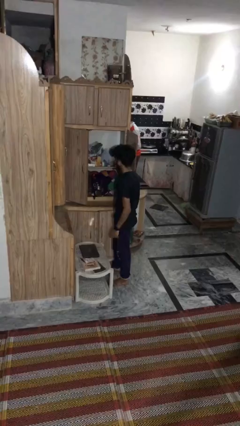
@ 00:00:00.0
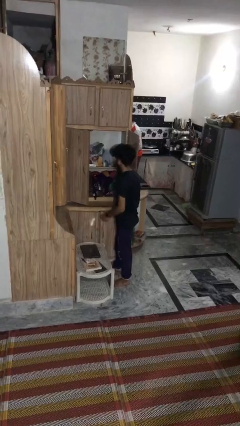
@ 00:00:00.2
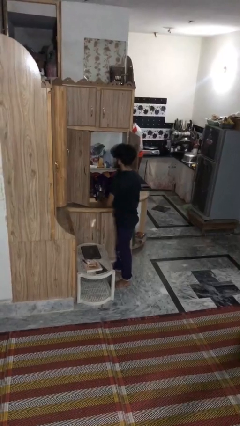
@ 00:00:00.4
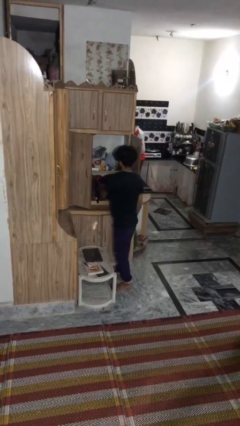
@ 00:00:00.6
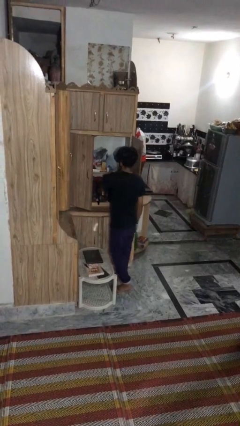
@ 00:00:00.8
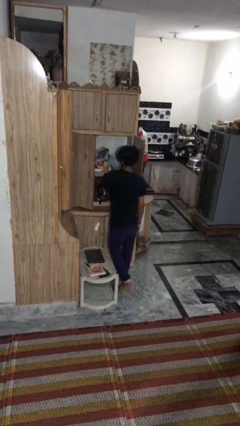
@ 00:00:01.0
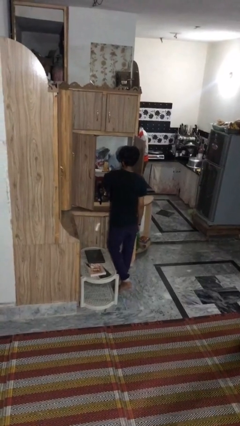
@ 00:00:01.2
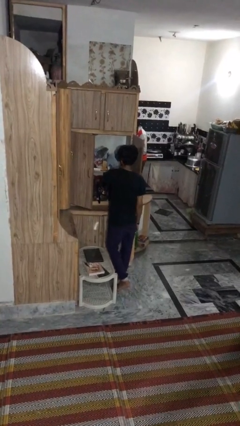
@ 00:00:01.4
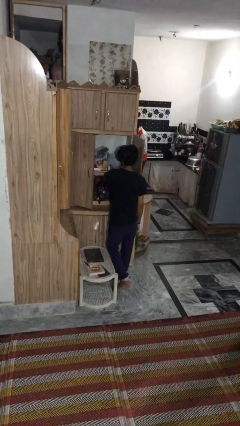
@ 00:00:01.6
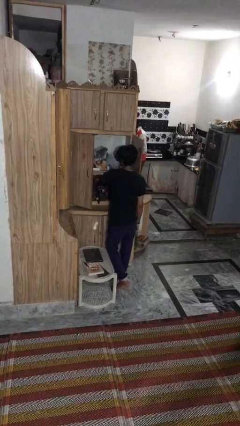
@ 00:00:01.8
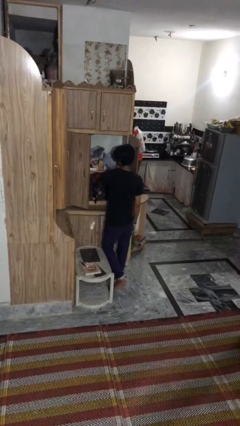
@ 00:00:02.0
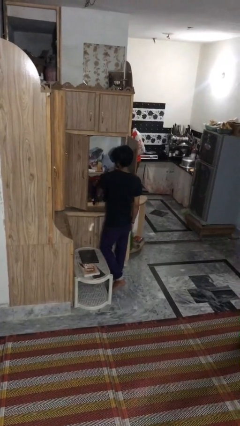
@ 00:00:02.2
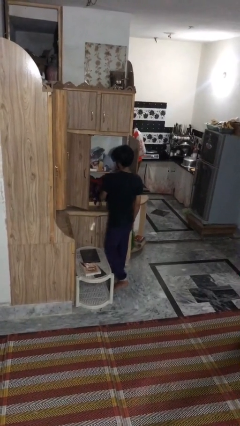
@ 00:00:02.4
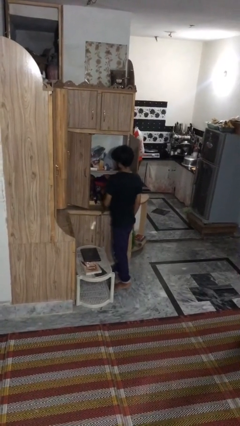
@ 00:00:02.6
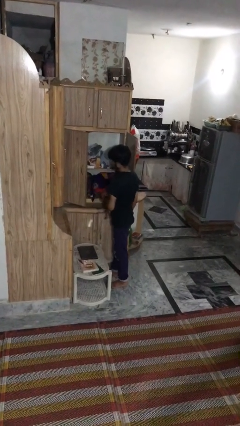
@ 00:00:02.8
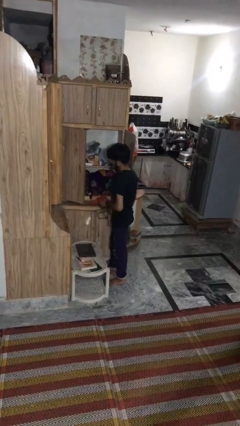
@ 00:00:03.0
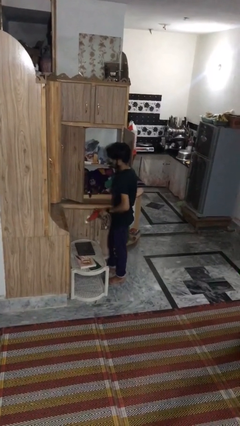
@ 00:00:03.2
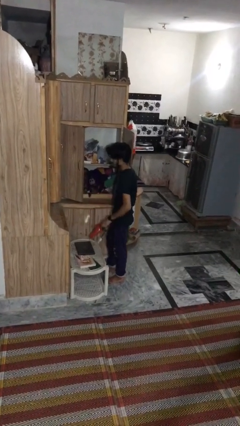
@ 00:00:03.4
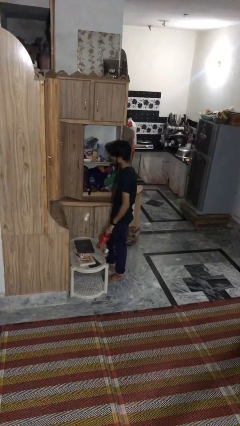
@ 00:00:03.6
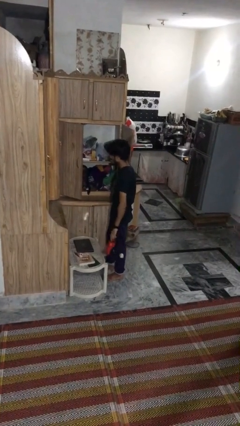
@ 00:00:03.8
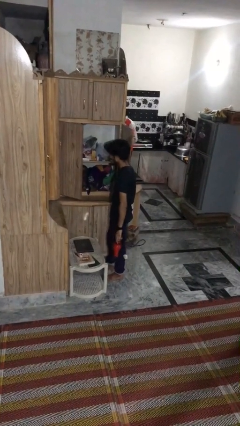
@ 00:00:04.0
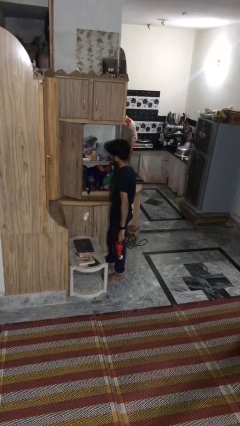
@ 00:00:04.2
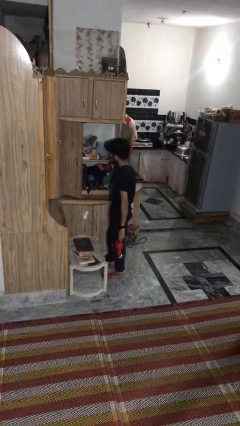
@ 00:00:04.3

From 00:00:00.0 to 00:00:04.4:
person picks up object from cabinet

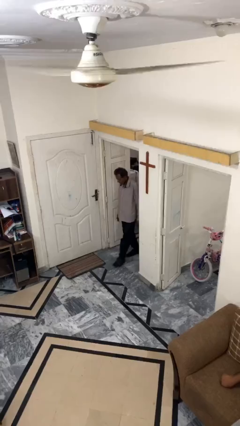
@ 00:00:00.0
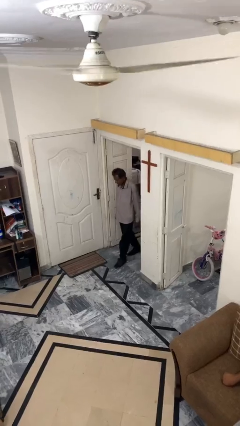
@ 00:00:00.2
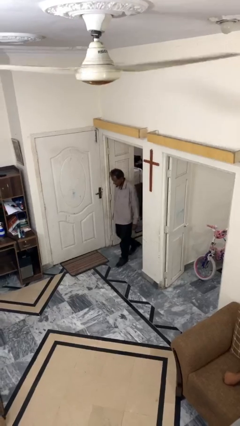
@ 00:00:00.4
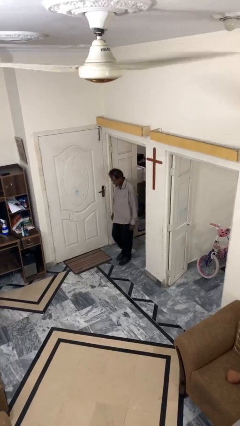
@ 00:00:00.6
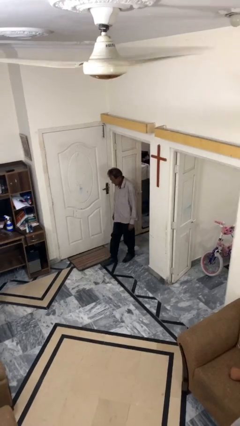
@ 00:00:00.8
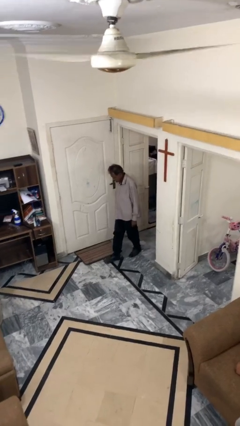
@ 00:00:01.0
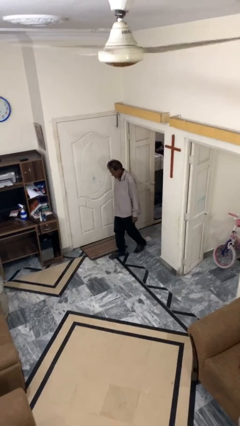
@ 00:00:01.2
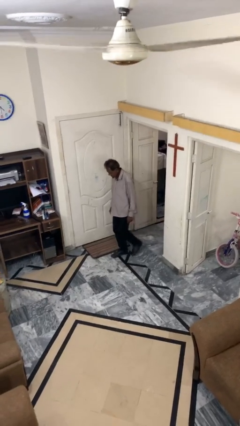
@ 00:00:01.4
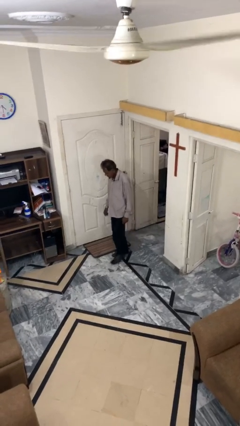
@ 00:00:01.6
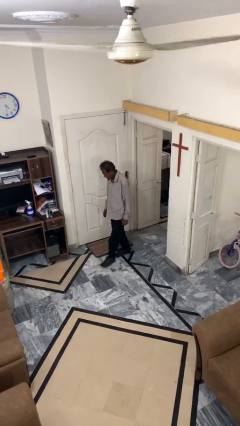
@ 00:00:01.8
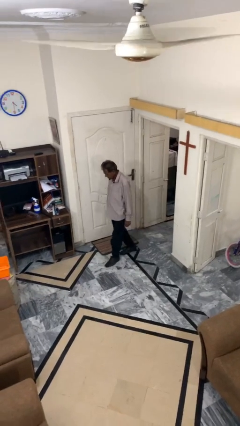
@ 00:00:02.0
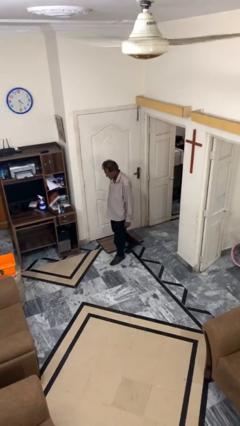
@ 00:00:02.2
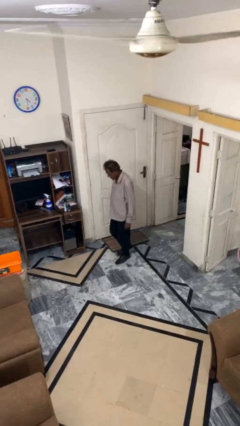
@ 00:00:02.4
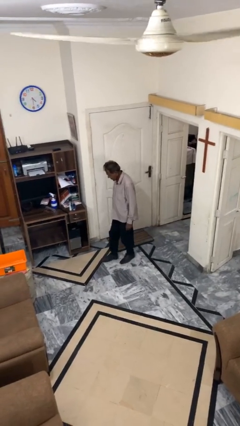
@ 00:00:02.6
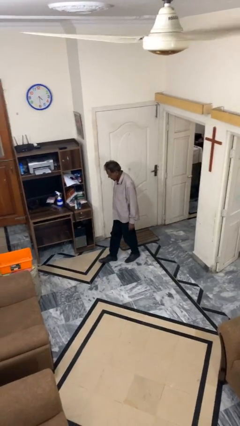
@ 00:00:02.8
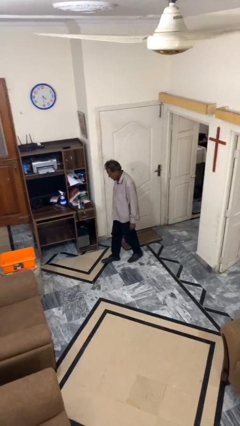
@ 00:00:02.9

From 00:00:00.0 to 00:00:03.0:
person enters scene through structure

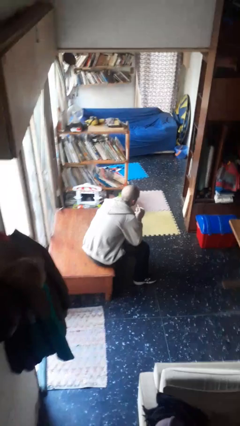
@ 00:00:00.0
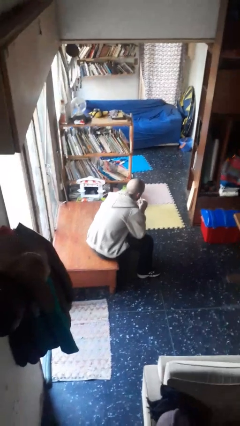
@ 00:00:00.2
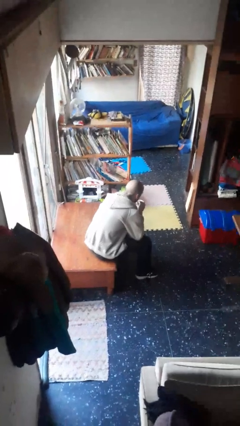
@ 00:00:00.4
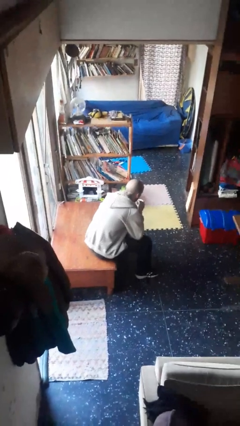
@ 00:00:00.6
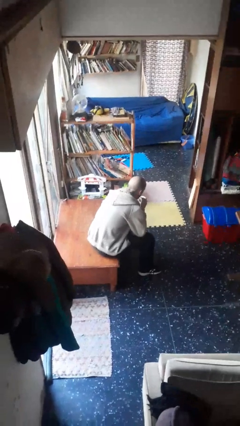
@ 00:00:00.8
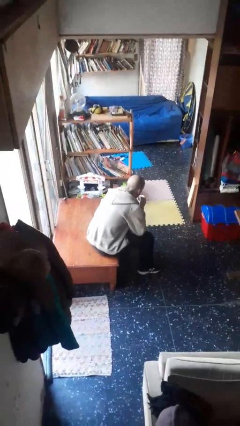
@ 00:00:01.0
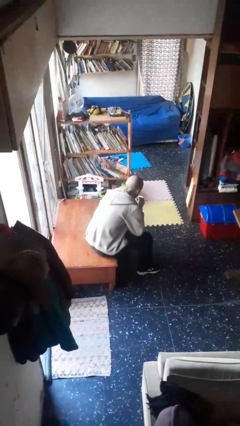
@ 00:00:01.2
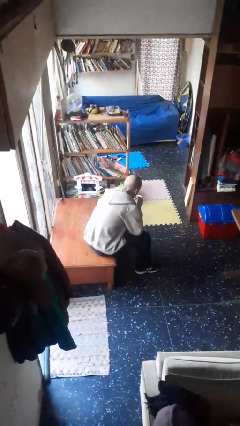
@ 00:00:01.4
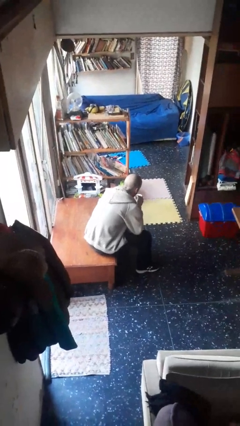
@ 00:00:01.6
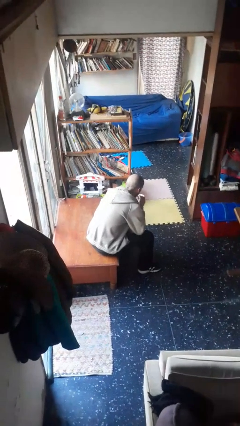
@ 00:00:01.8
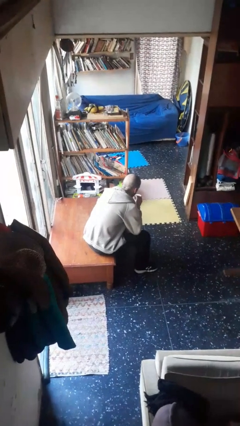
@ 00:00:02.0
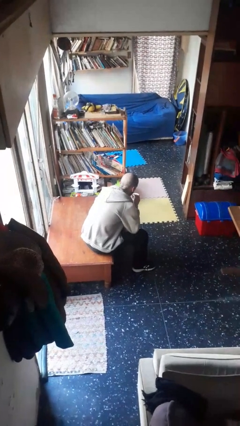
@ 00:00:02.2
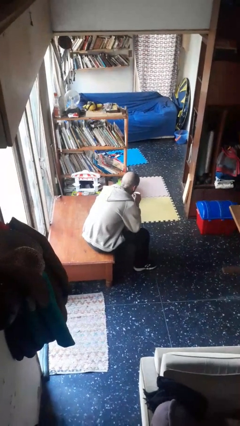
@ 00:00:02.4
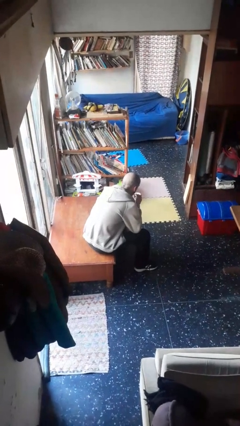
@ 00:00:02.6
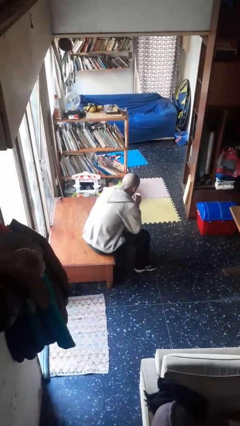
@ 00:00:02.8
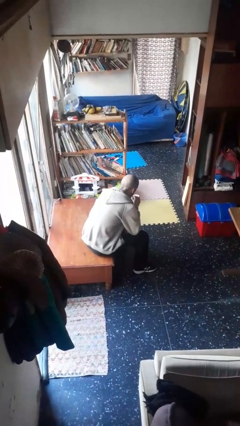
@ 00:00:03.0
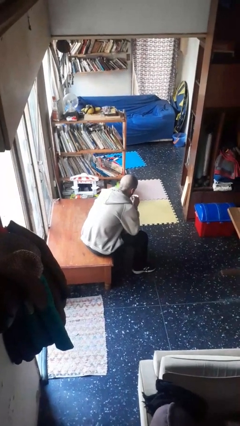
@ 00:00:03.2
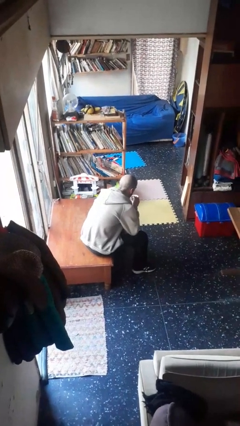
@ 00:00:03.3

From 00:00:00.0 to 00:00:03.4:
person drinks from straw

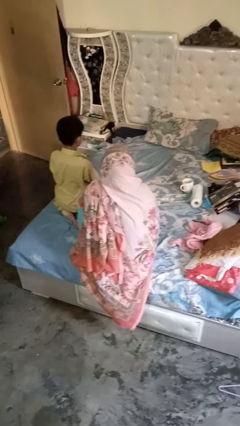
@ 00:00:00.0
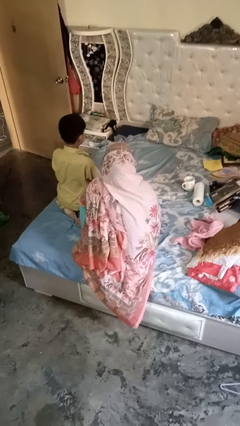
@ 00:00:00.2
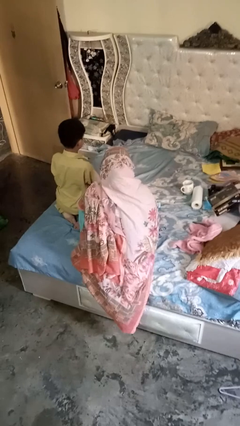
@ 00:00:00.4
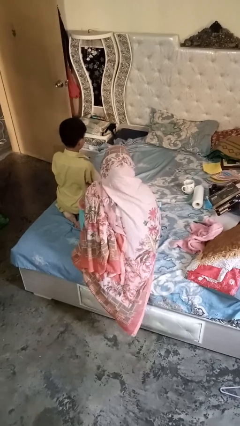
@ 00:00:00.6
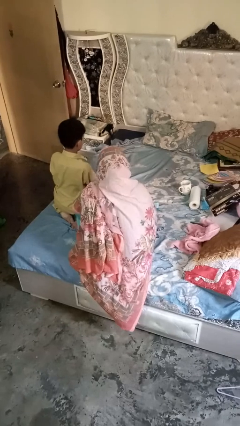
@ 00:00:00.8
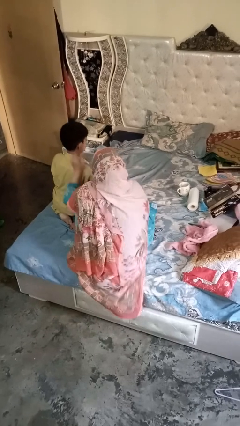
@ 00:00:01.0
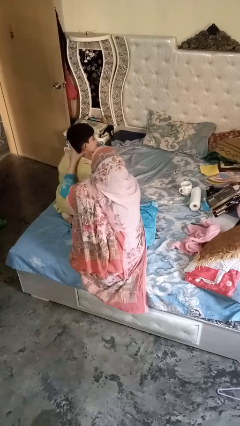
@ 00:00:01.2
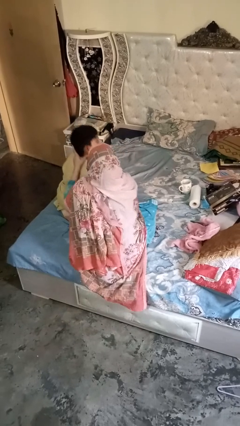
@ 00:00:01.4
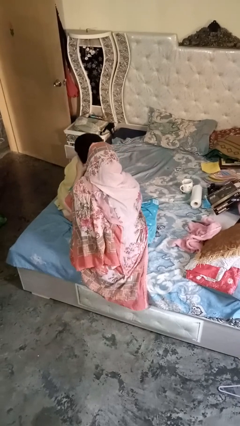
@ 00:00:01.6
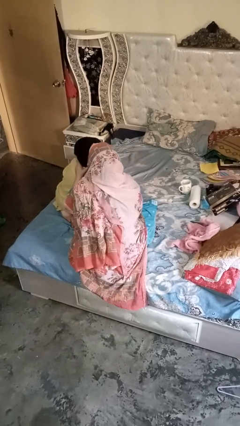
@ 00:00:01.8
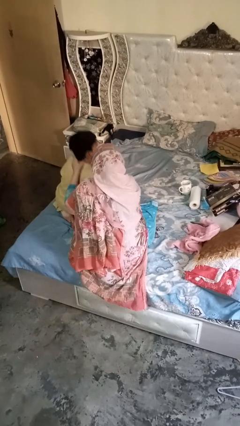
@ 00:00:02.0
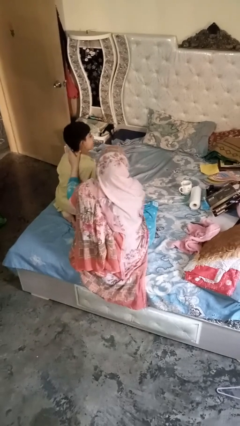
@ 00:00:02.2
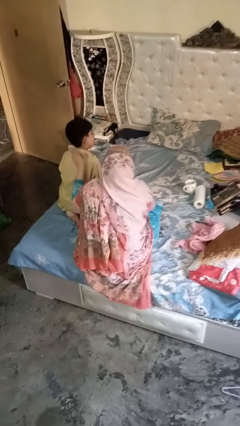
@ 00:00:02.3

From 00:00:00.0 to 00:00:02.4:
person gestures blow kiss

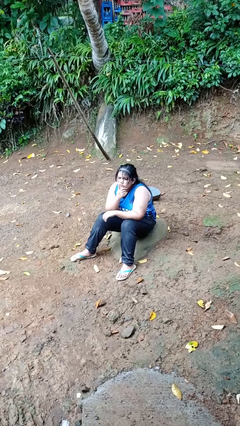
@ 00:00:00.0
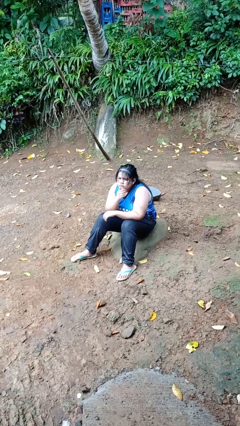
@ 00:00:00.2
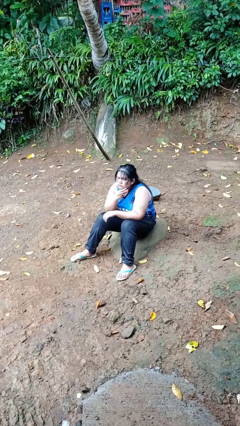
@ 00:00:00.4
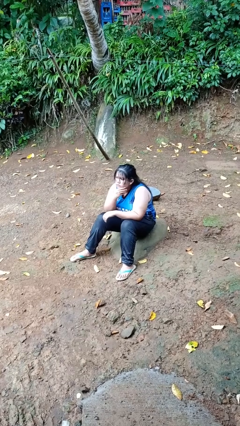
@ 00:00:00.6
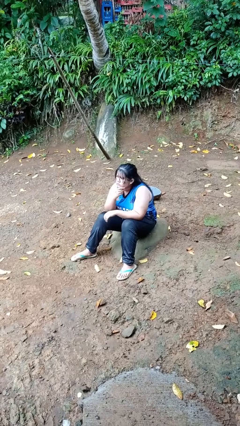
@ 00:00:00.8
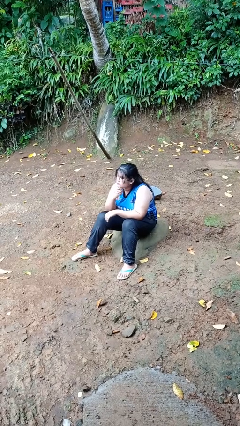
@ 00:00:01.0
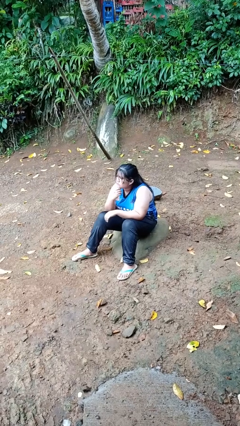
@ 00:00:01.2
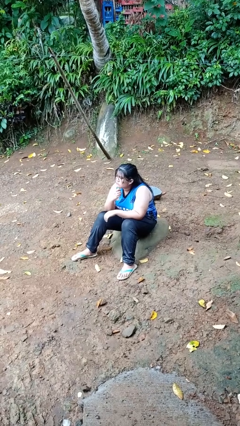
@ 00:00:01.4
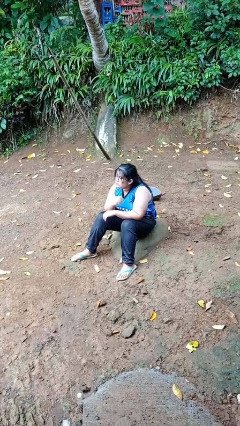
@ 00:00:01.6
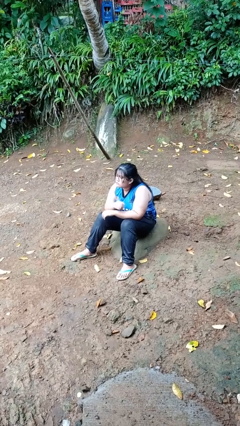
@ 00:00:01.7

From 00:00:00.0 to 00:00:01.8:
person strokes chin

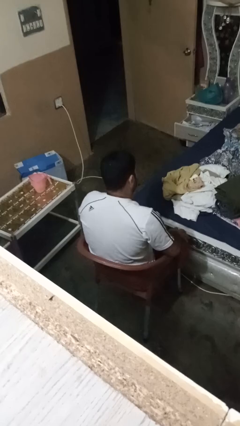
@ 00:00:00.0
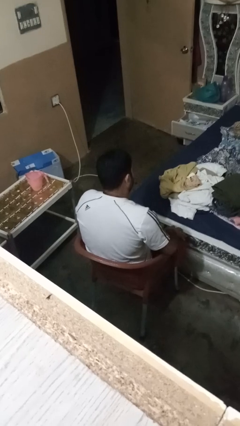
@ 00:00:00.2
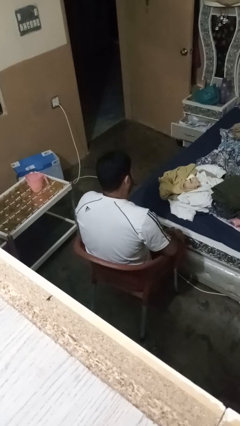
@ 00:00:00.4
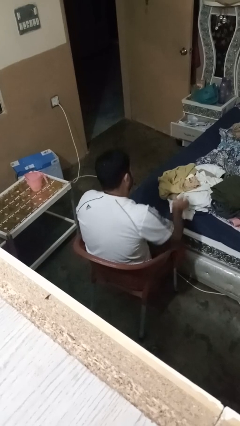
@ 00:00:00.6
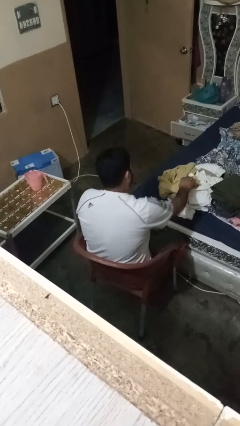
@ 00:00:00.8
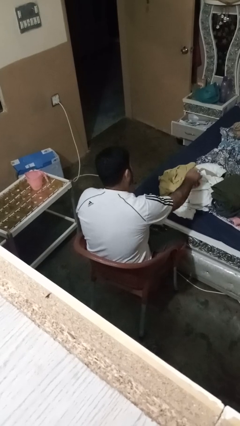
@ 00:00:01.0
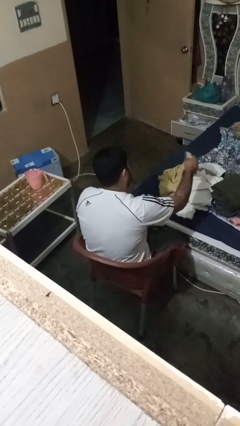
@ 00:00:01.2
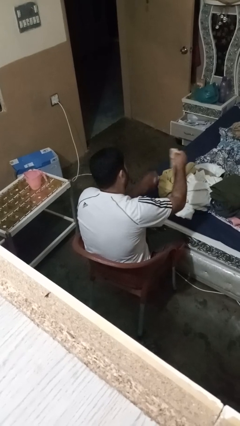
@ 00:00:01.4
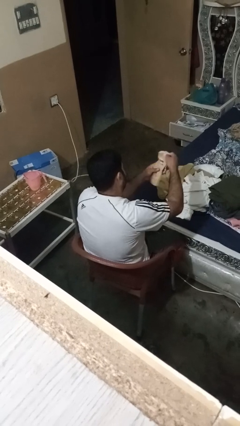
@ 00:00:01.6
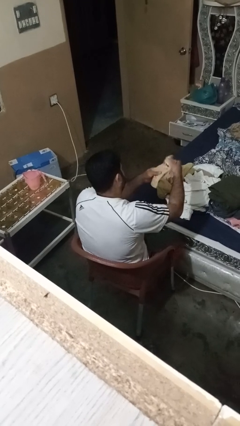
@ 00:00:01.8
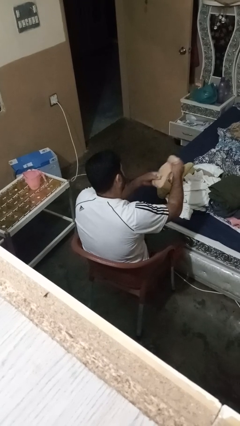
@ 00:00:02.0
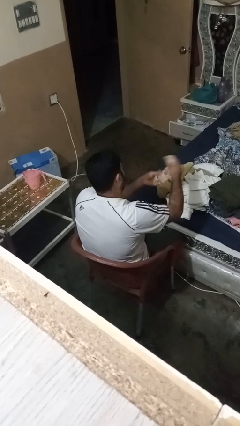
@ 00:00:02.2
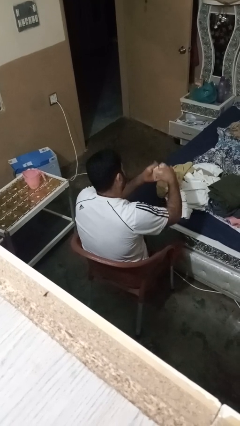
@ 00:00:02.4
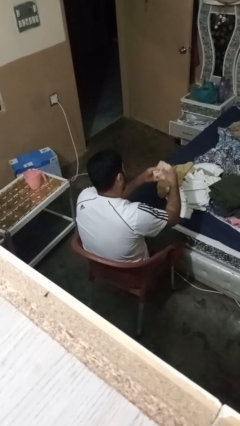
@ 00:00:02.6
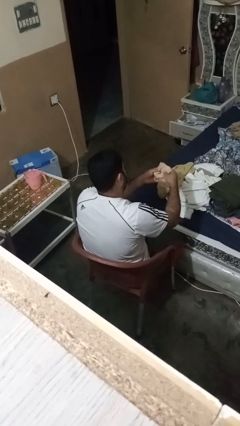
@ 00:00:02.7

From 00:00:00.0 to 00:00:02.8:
person folds socks
